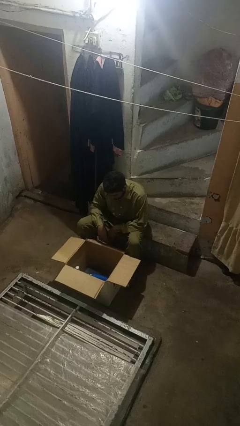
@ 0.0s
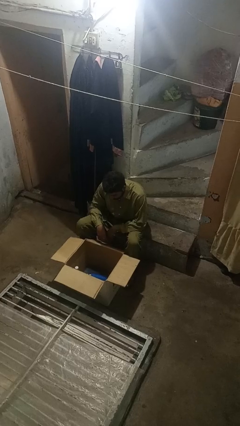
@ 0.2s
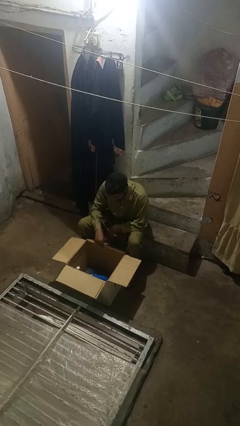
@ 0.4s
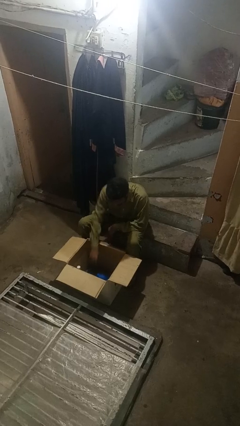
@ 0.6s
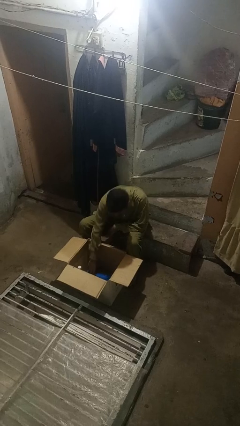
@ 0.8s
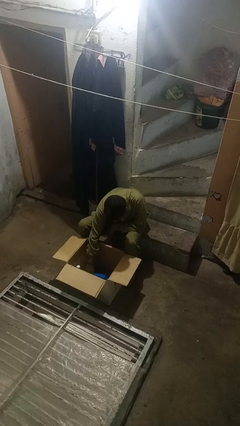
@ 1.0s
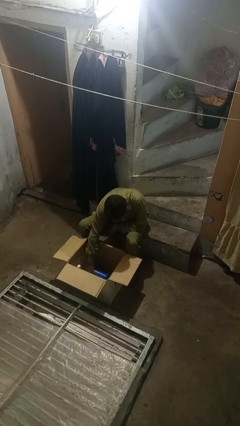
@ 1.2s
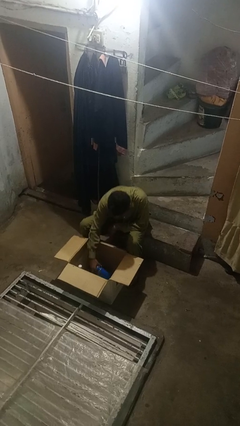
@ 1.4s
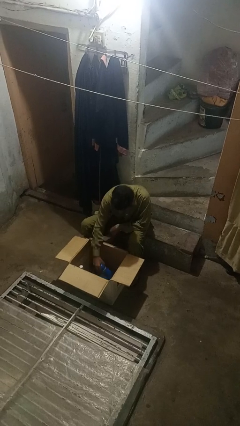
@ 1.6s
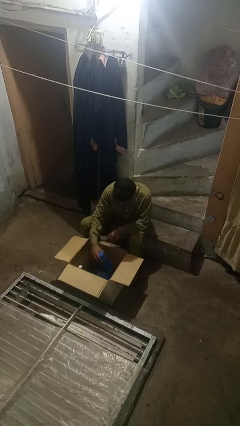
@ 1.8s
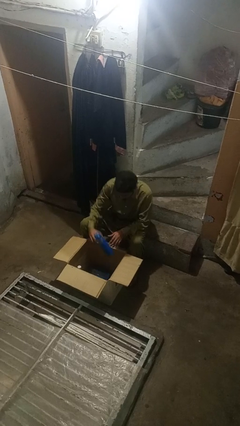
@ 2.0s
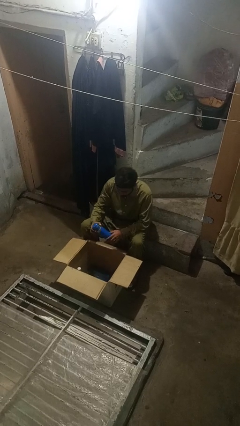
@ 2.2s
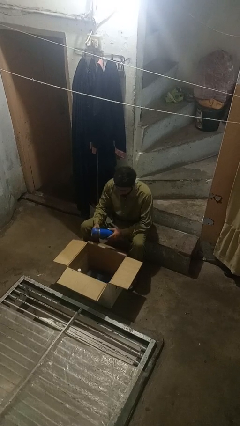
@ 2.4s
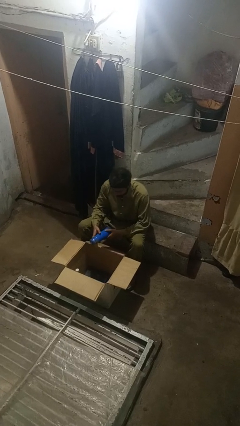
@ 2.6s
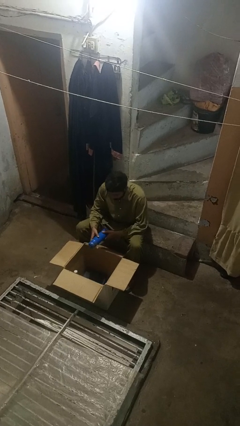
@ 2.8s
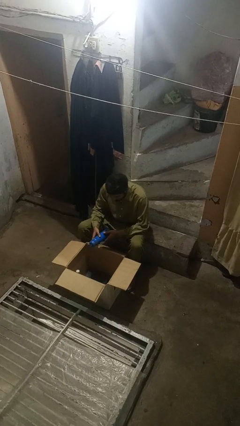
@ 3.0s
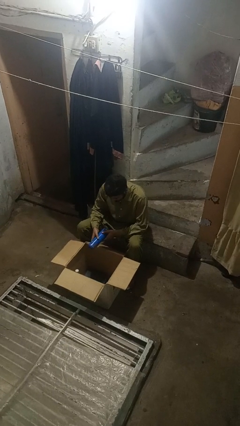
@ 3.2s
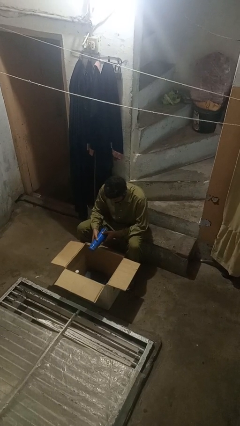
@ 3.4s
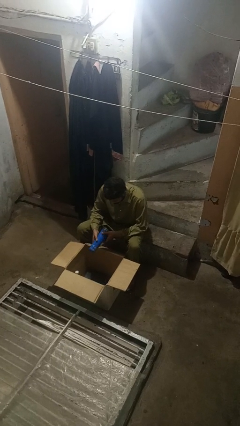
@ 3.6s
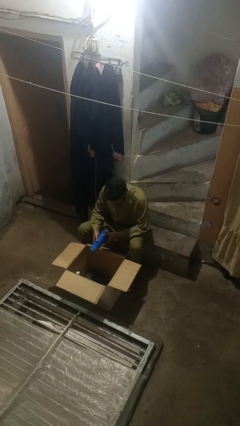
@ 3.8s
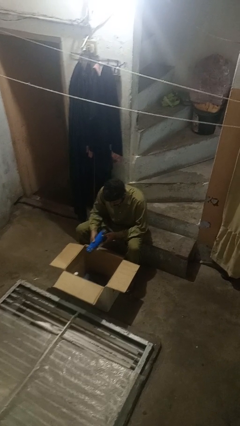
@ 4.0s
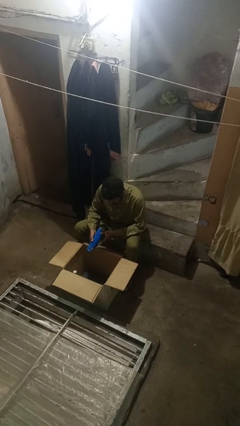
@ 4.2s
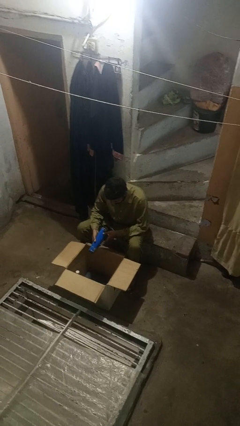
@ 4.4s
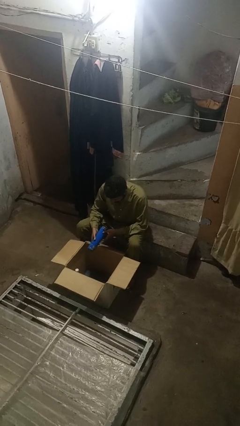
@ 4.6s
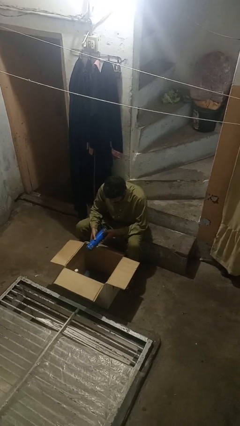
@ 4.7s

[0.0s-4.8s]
person takes object from box

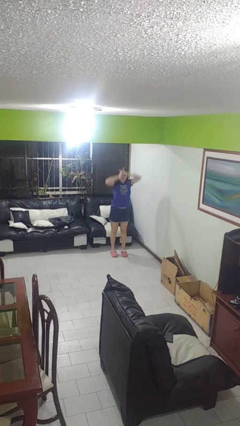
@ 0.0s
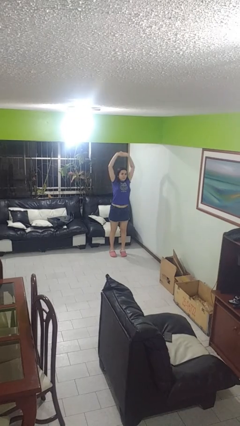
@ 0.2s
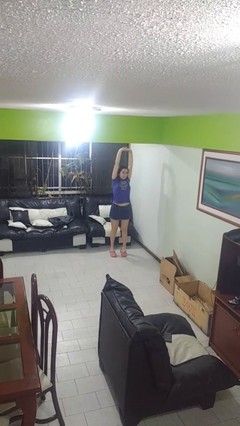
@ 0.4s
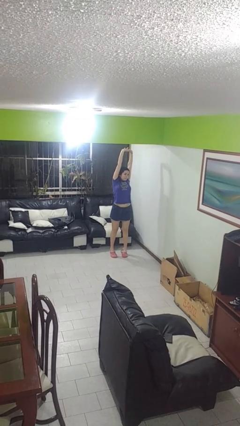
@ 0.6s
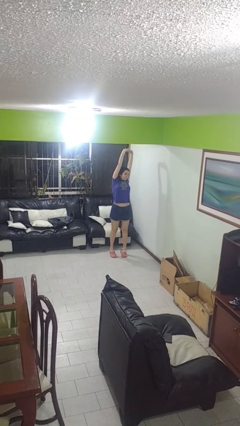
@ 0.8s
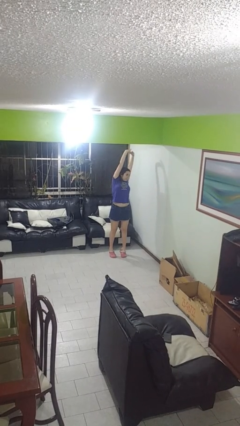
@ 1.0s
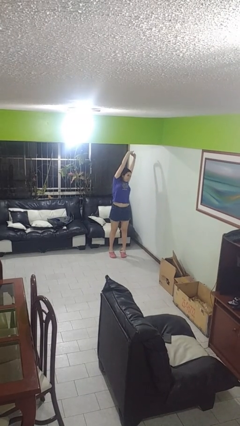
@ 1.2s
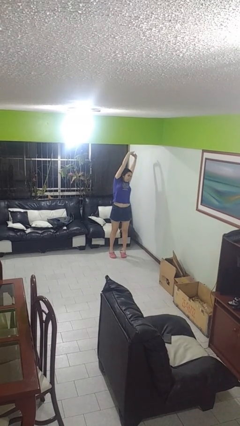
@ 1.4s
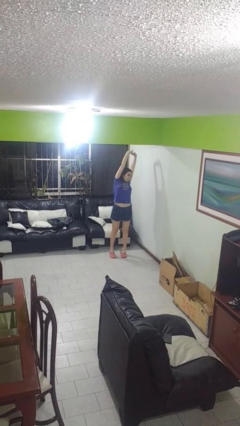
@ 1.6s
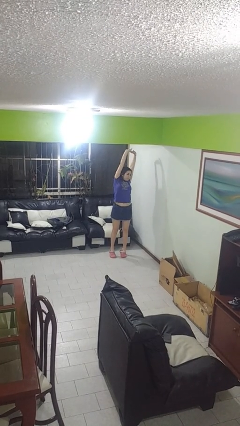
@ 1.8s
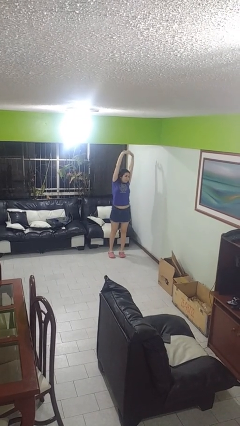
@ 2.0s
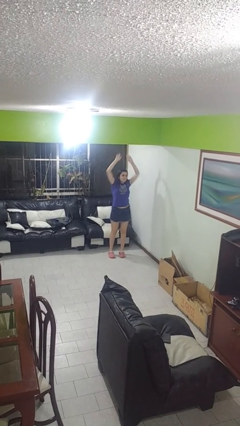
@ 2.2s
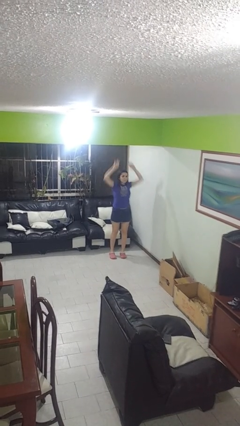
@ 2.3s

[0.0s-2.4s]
person stretches arms over head

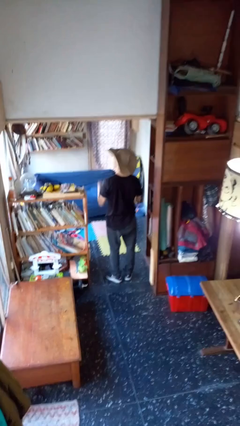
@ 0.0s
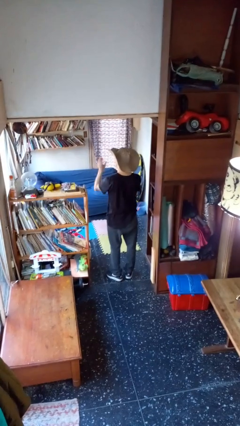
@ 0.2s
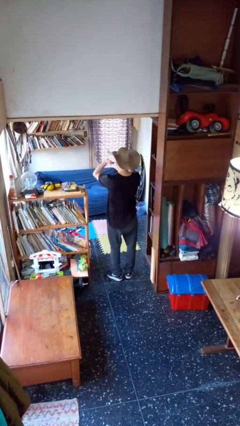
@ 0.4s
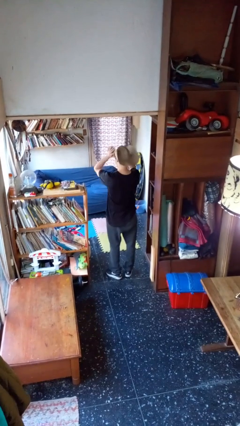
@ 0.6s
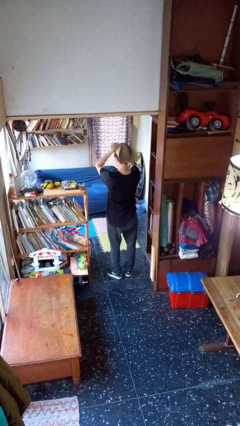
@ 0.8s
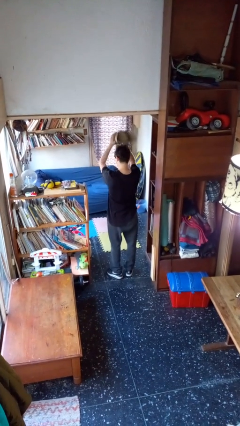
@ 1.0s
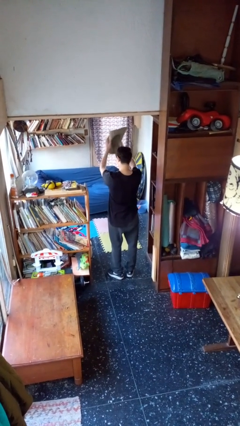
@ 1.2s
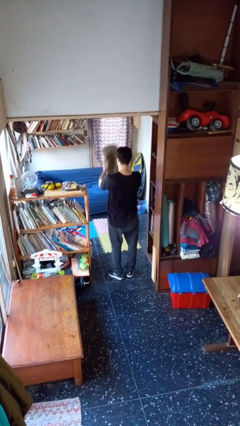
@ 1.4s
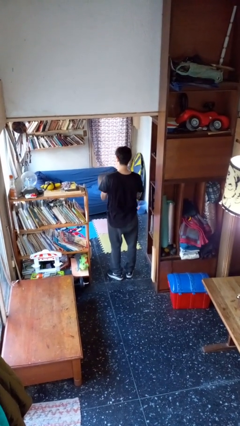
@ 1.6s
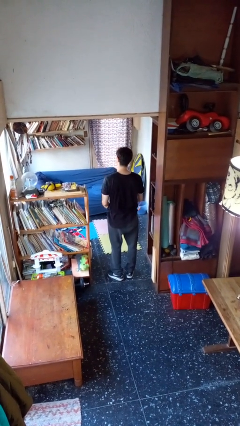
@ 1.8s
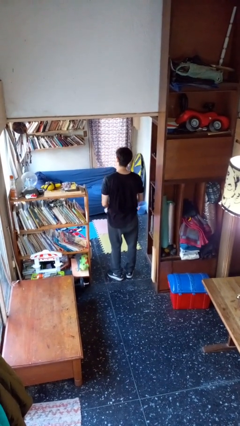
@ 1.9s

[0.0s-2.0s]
person takes off hat

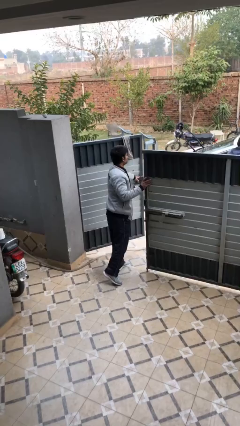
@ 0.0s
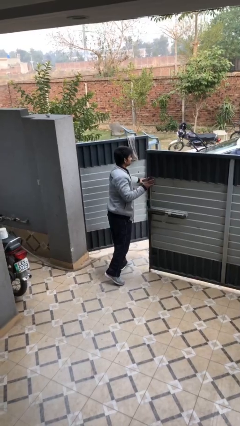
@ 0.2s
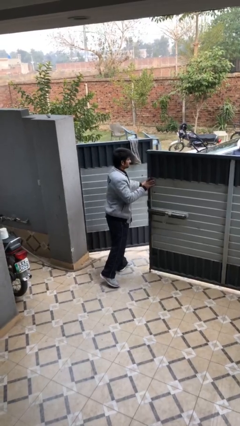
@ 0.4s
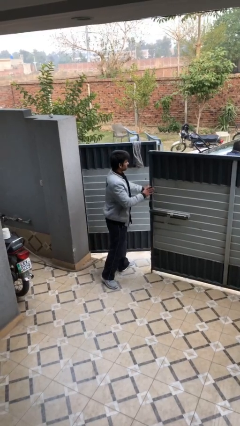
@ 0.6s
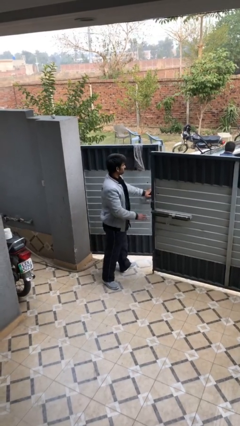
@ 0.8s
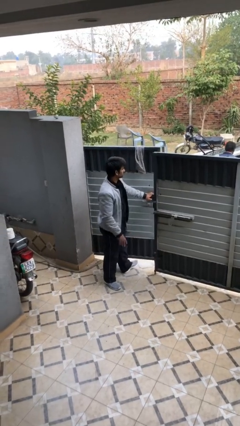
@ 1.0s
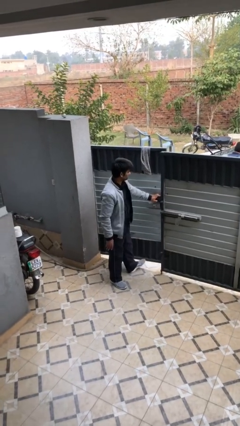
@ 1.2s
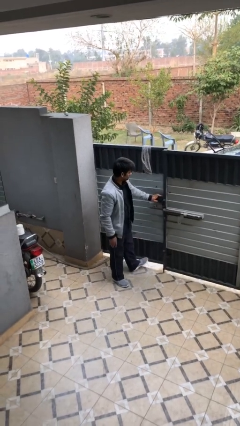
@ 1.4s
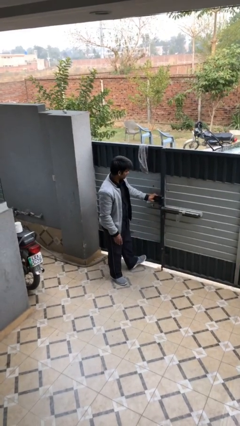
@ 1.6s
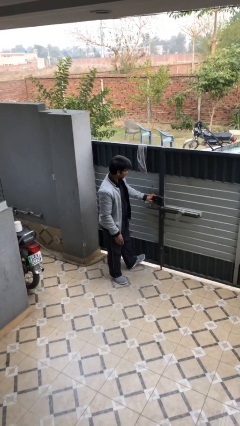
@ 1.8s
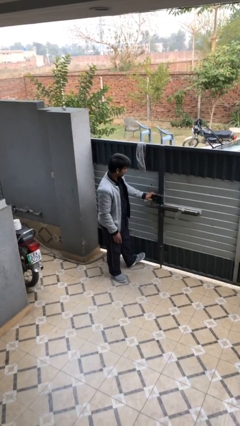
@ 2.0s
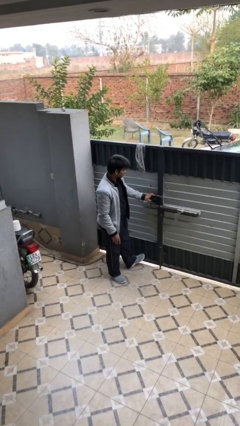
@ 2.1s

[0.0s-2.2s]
person closes facility door

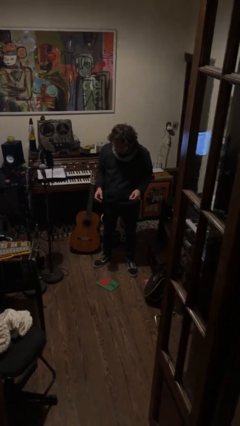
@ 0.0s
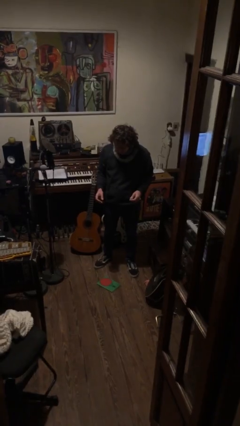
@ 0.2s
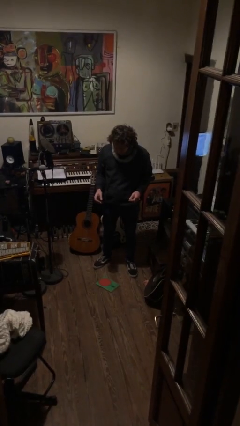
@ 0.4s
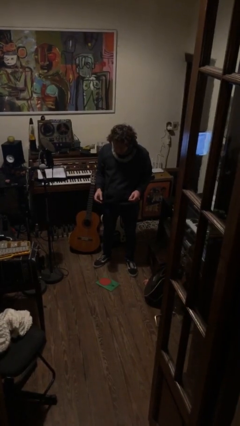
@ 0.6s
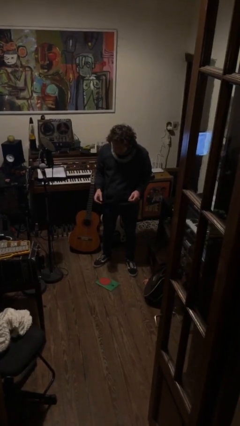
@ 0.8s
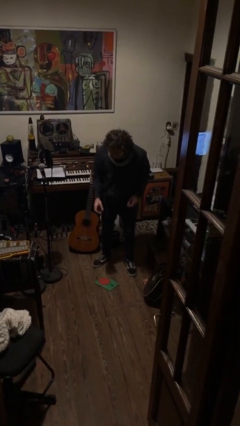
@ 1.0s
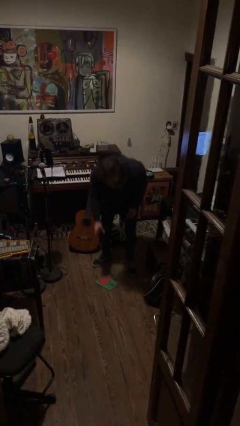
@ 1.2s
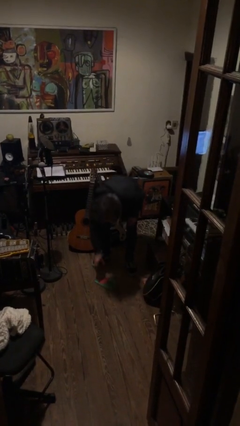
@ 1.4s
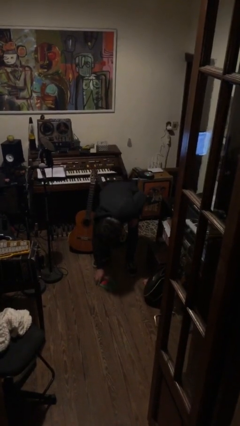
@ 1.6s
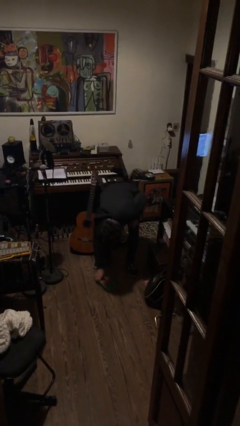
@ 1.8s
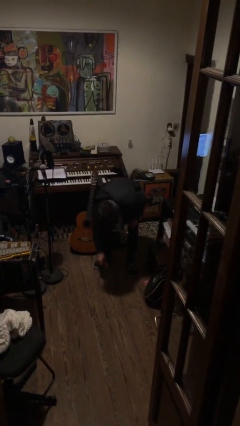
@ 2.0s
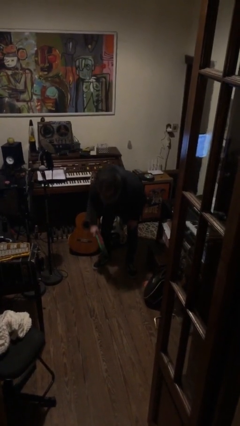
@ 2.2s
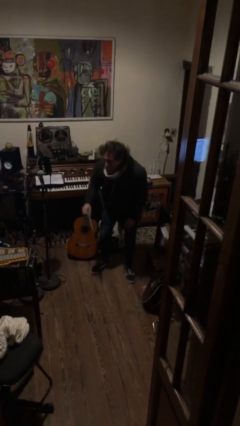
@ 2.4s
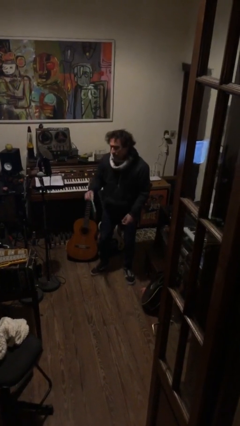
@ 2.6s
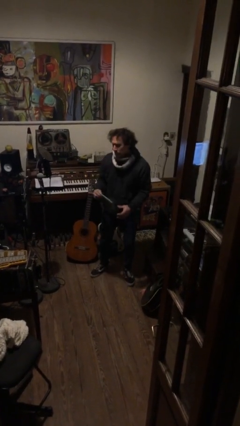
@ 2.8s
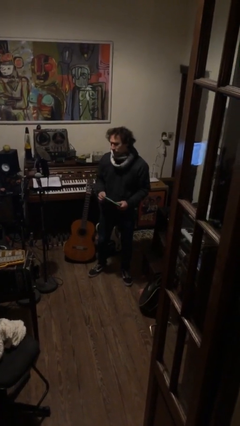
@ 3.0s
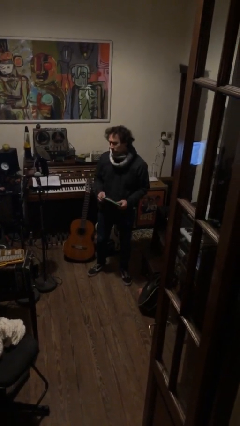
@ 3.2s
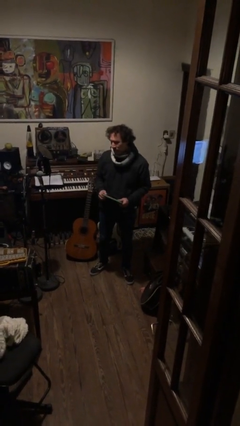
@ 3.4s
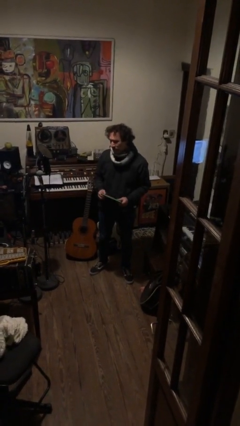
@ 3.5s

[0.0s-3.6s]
person picks up object from floor

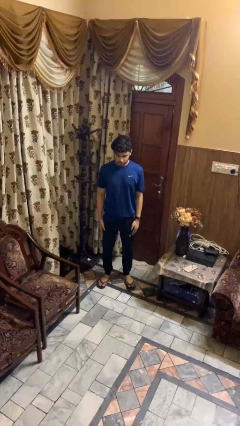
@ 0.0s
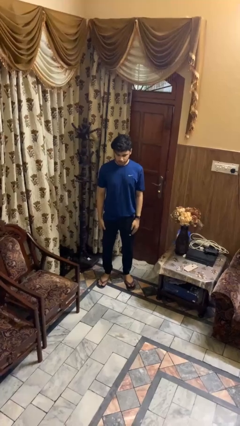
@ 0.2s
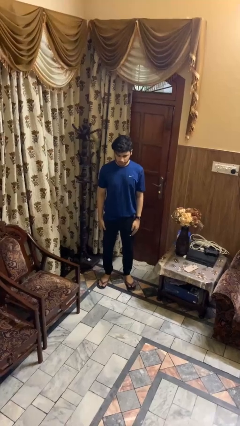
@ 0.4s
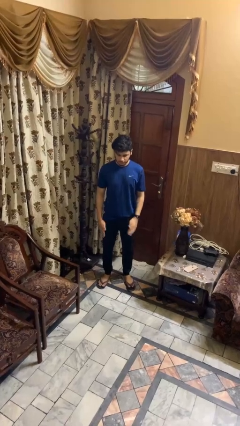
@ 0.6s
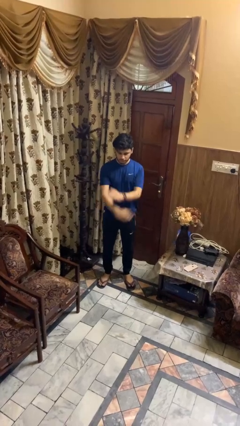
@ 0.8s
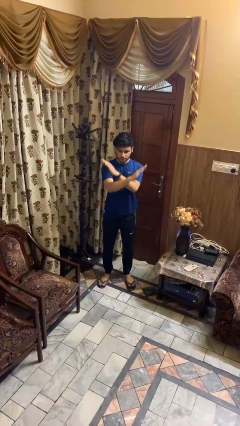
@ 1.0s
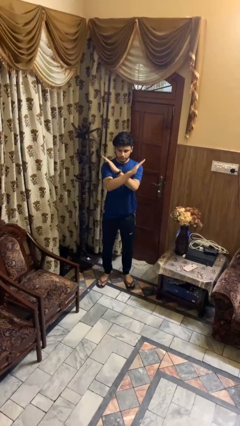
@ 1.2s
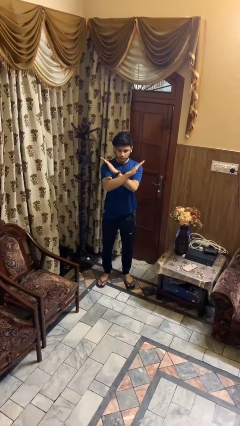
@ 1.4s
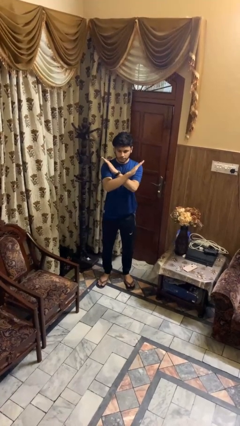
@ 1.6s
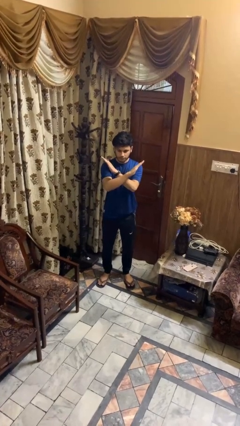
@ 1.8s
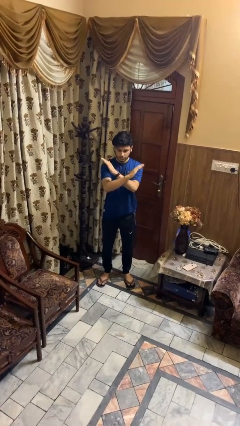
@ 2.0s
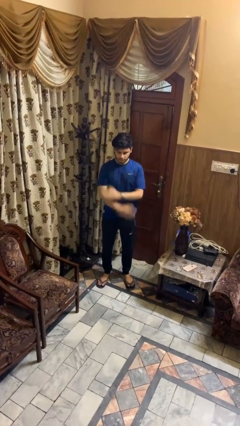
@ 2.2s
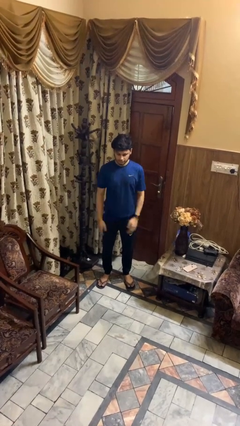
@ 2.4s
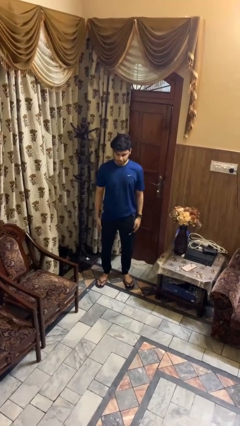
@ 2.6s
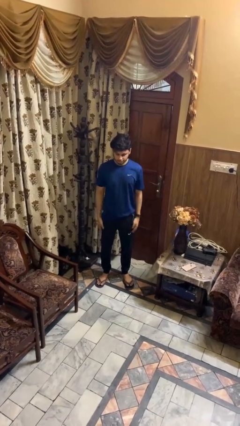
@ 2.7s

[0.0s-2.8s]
person gestures arms x
